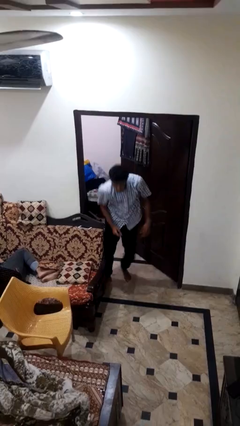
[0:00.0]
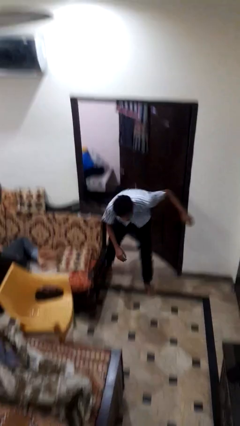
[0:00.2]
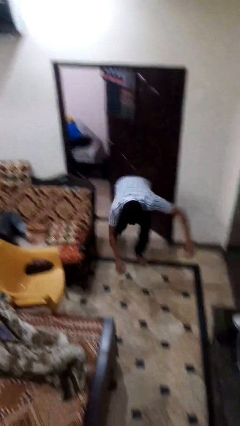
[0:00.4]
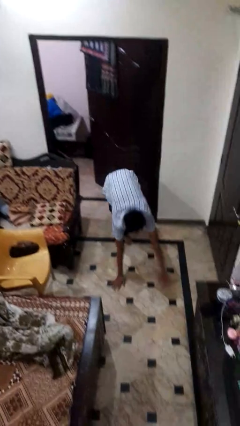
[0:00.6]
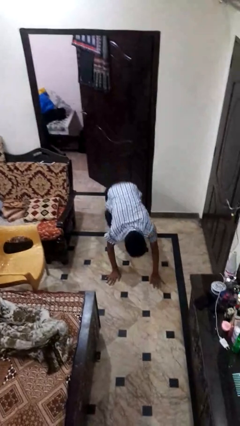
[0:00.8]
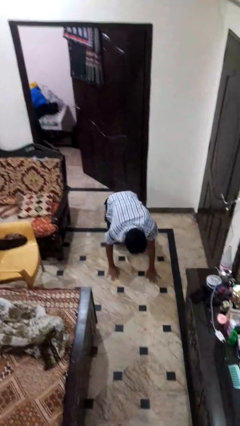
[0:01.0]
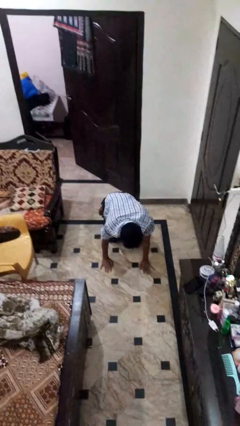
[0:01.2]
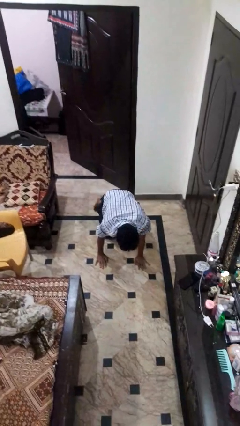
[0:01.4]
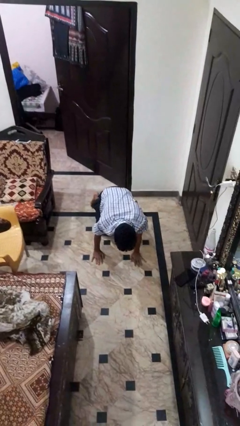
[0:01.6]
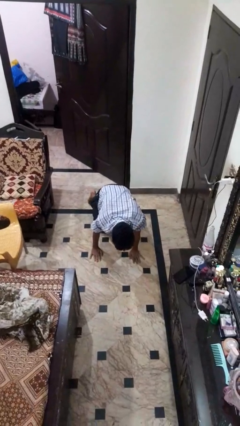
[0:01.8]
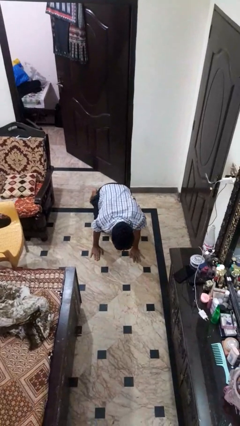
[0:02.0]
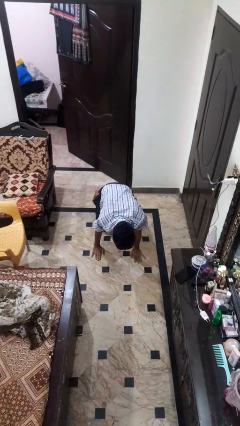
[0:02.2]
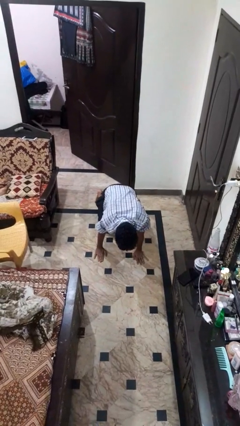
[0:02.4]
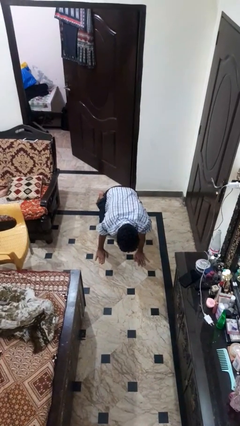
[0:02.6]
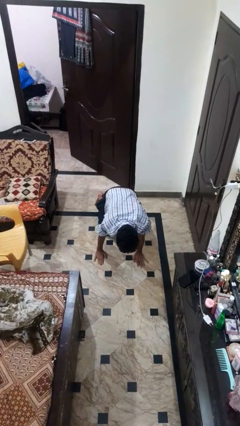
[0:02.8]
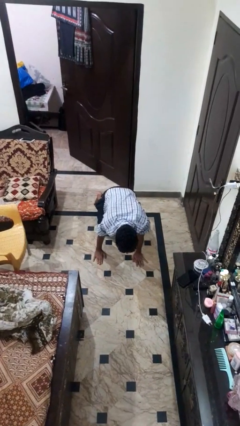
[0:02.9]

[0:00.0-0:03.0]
person trips on object on floor

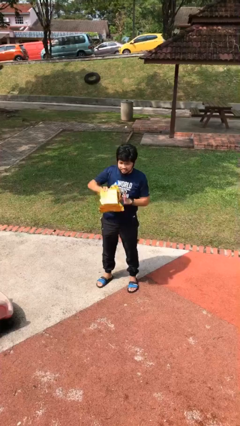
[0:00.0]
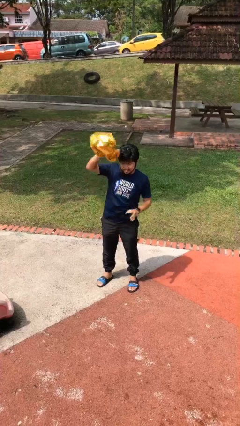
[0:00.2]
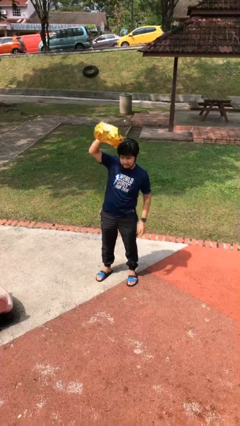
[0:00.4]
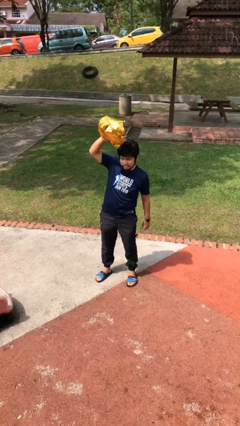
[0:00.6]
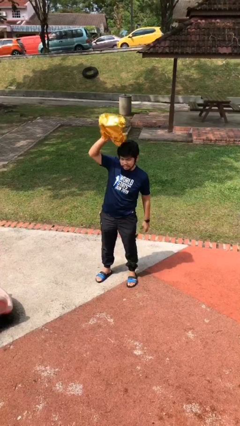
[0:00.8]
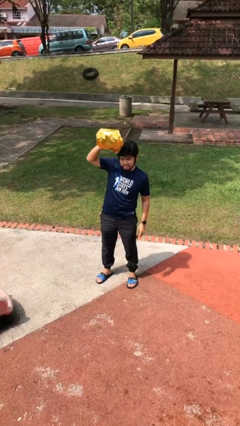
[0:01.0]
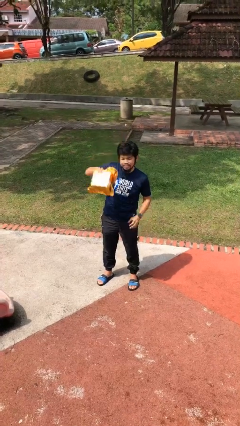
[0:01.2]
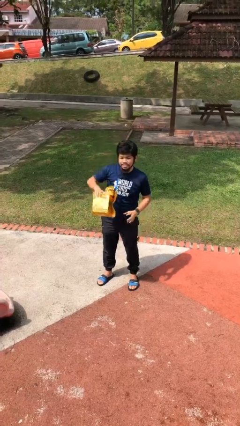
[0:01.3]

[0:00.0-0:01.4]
person holds object above head

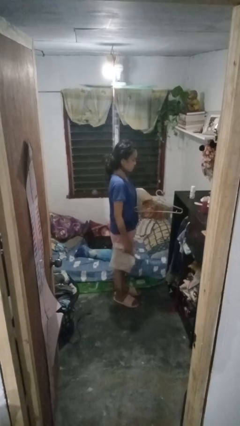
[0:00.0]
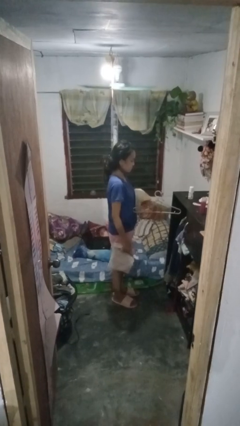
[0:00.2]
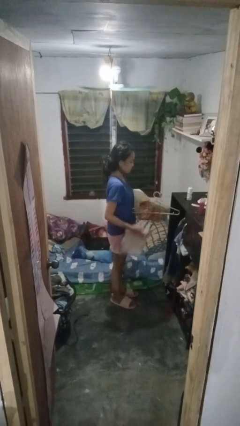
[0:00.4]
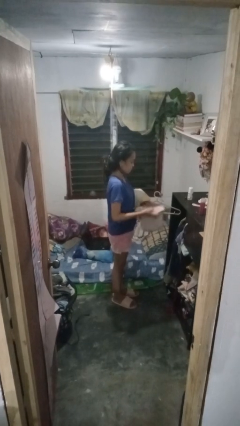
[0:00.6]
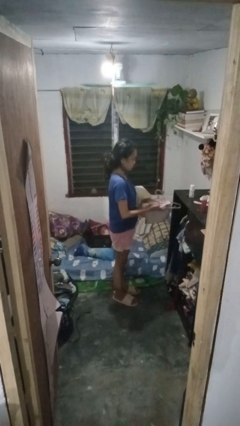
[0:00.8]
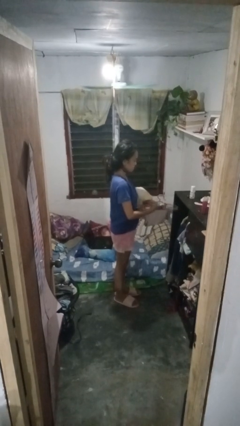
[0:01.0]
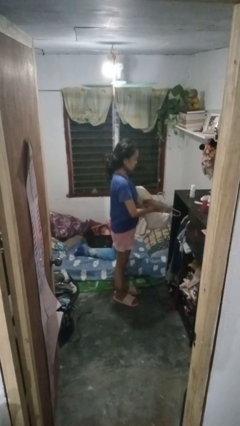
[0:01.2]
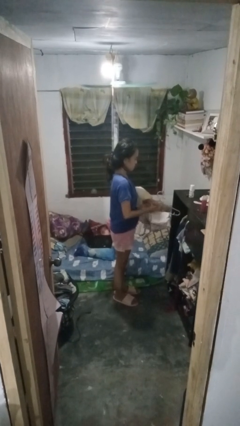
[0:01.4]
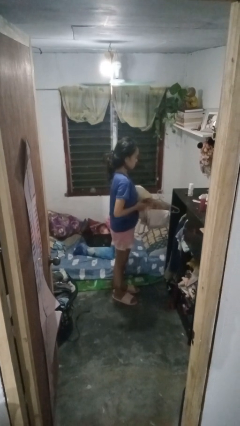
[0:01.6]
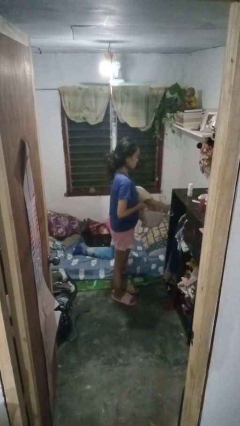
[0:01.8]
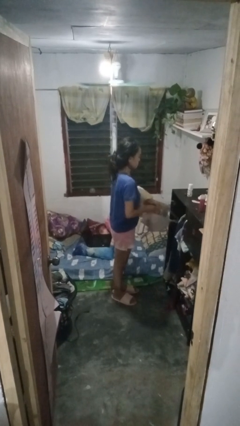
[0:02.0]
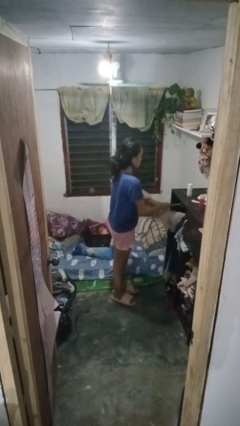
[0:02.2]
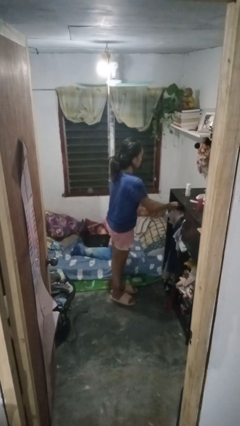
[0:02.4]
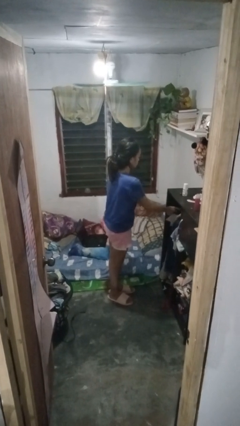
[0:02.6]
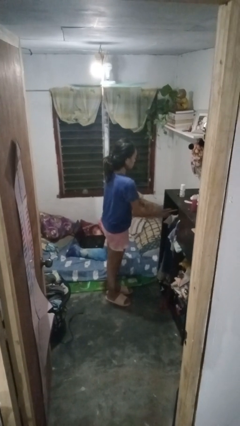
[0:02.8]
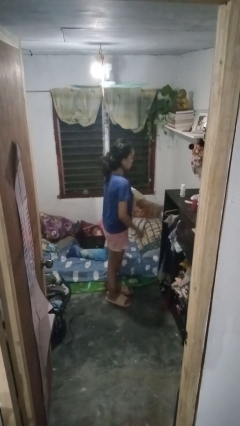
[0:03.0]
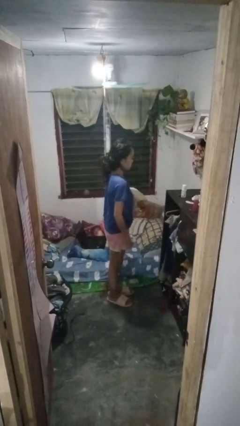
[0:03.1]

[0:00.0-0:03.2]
person puts clothes into closet

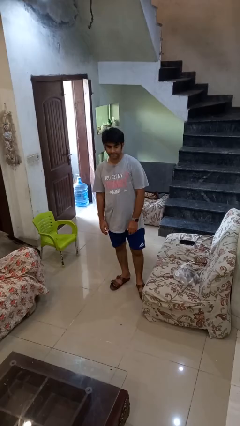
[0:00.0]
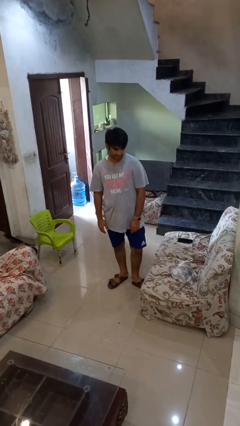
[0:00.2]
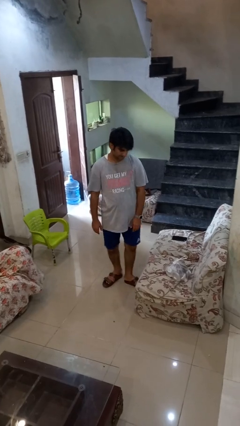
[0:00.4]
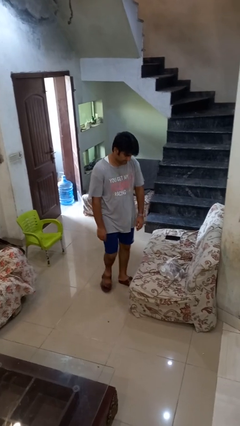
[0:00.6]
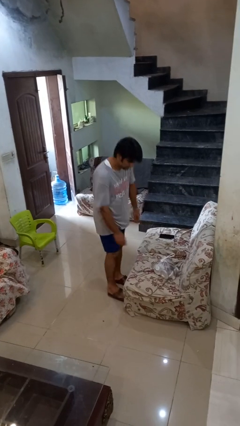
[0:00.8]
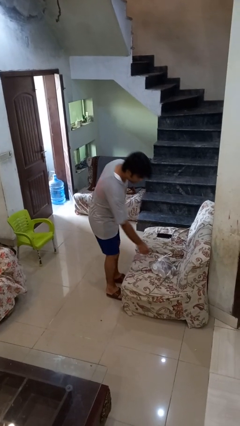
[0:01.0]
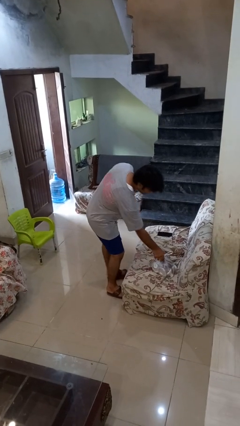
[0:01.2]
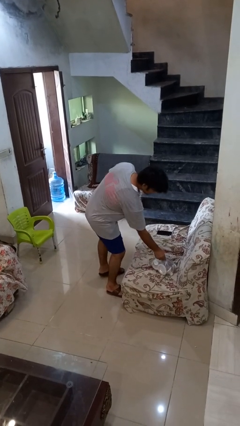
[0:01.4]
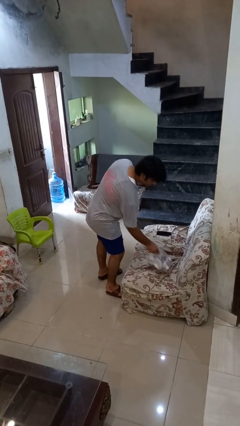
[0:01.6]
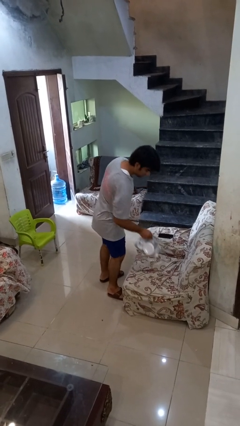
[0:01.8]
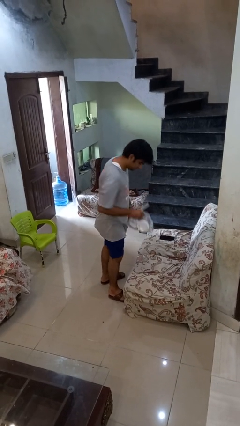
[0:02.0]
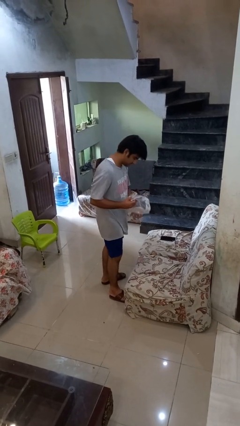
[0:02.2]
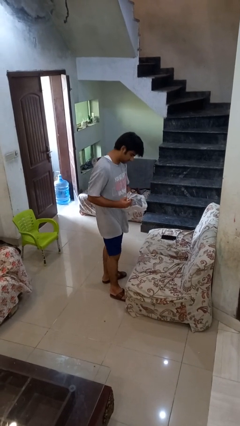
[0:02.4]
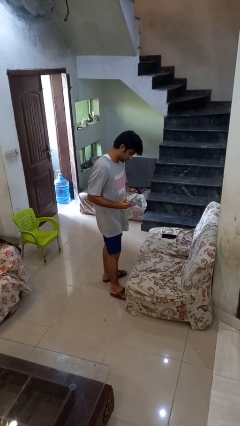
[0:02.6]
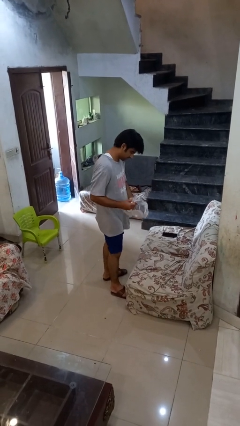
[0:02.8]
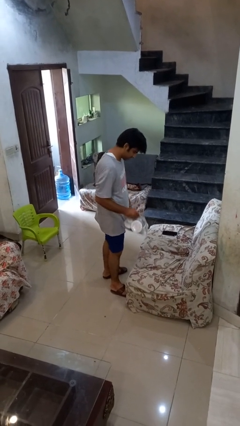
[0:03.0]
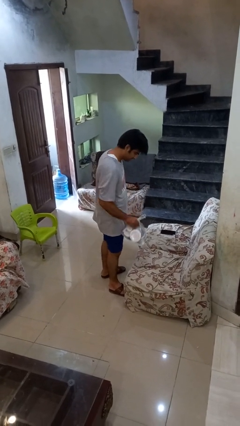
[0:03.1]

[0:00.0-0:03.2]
person picks up object from couch

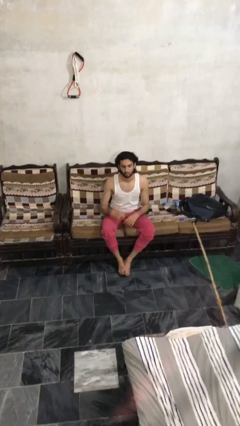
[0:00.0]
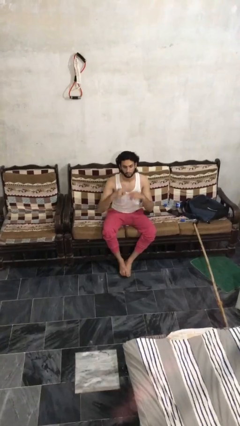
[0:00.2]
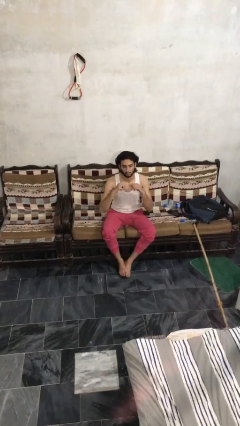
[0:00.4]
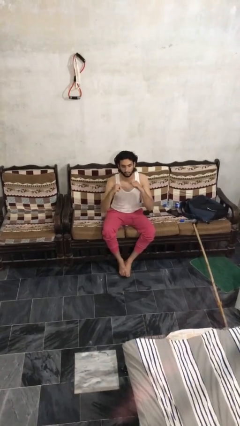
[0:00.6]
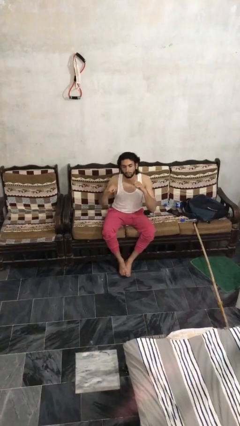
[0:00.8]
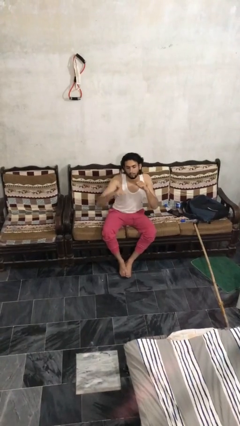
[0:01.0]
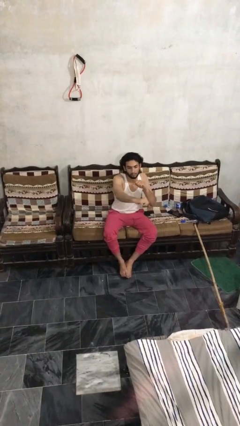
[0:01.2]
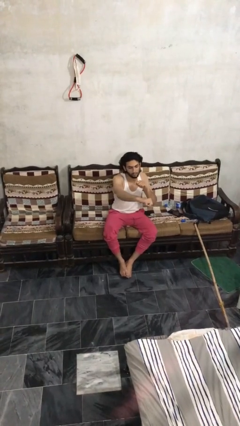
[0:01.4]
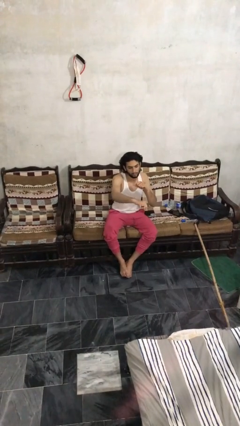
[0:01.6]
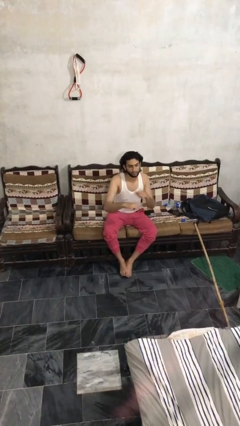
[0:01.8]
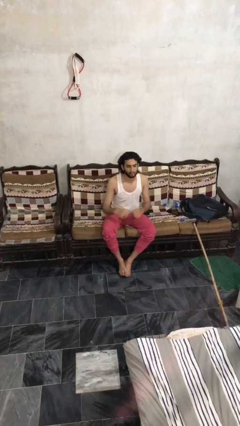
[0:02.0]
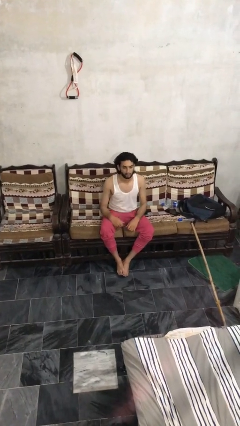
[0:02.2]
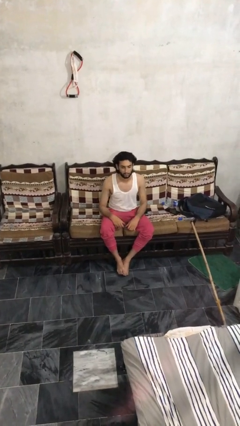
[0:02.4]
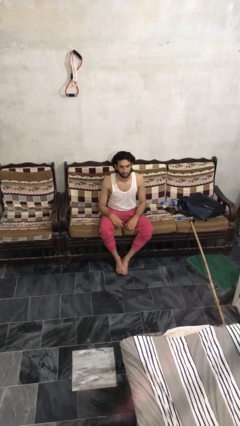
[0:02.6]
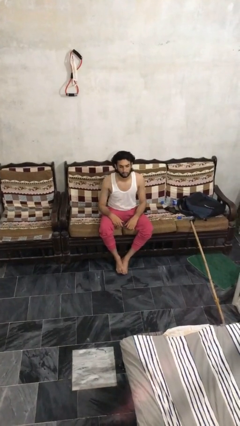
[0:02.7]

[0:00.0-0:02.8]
person punches

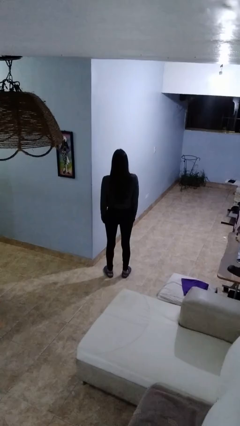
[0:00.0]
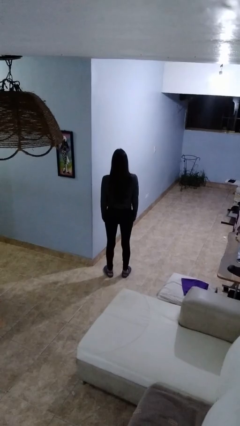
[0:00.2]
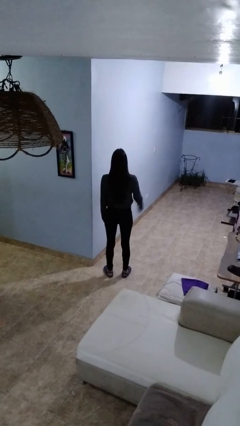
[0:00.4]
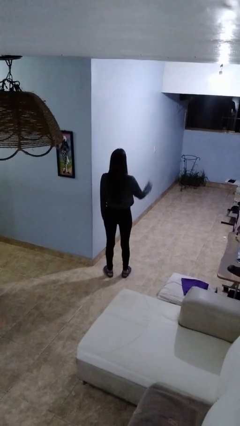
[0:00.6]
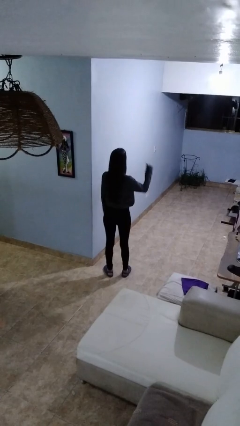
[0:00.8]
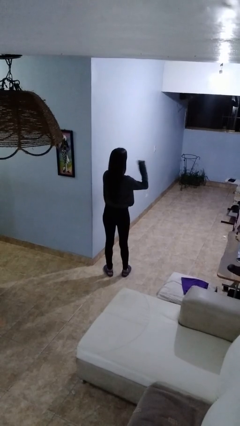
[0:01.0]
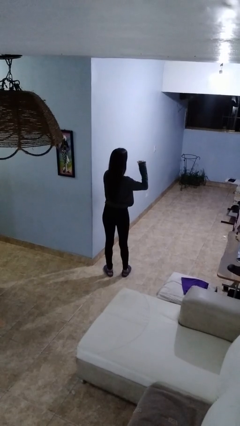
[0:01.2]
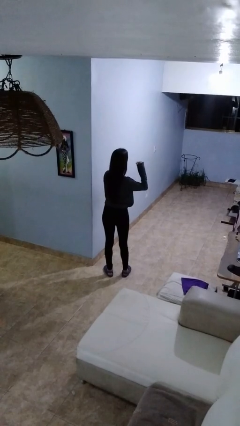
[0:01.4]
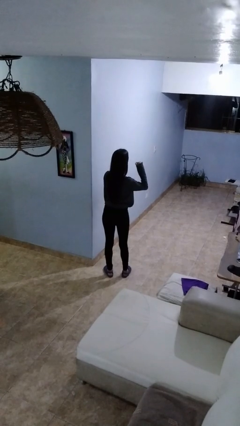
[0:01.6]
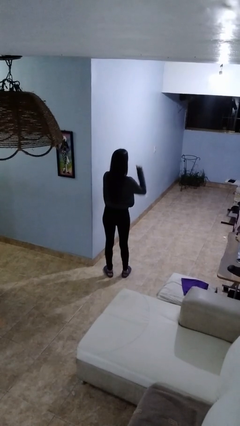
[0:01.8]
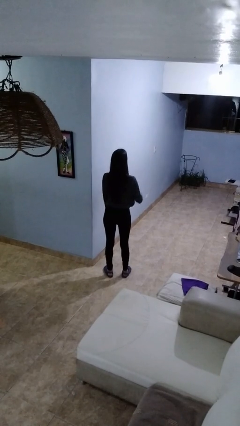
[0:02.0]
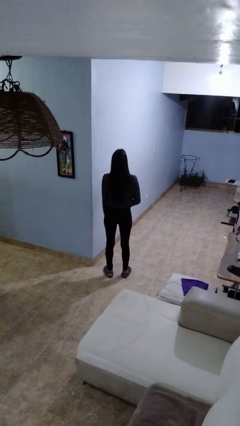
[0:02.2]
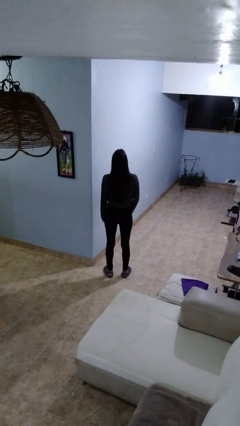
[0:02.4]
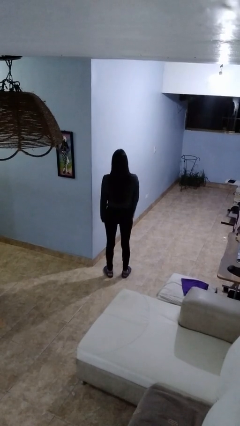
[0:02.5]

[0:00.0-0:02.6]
person gestures behind me

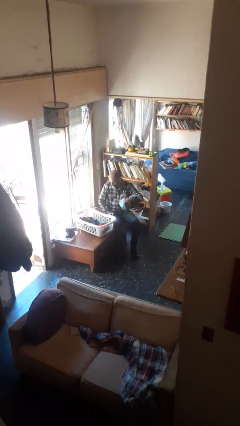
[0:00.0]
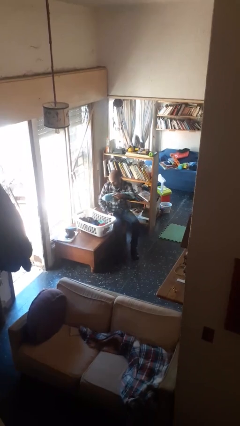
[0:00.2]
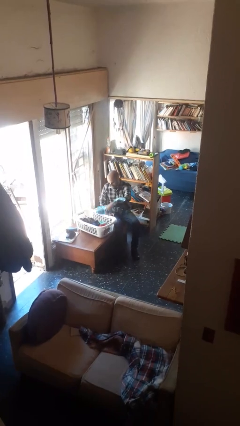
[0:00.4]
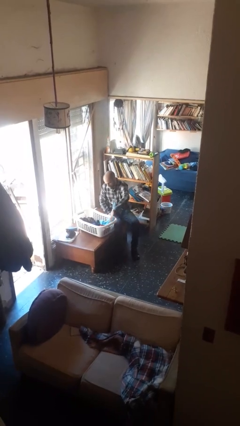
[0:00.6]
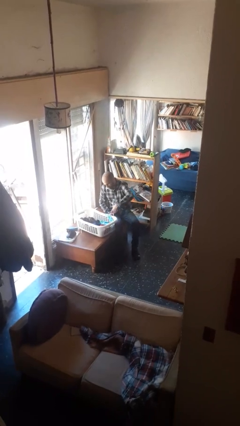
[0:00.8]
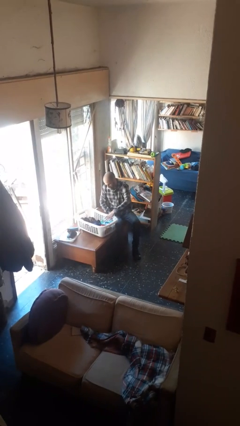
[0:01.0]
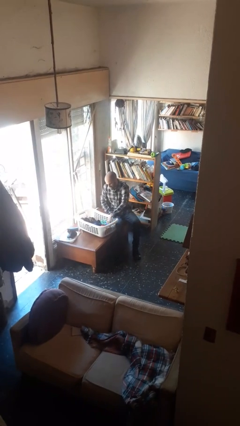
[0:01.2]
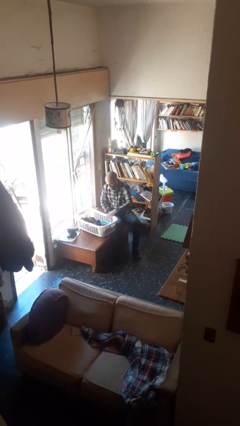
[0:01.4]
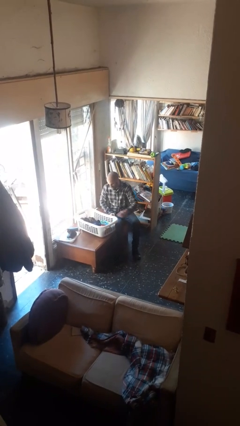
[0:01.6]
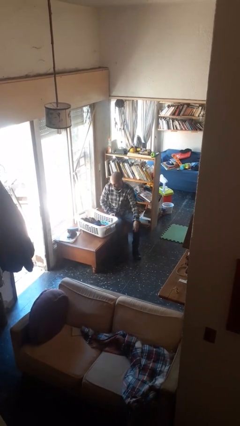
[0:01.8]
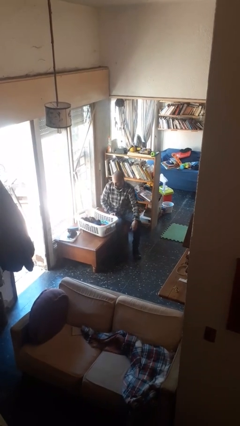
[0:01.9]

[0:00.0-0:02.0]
person puts object into basket
